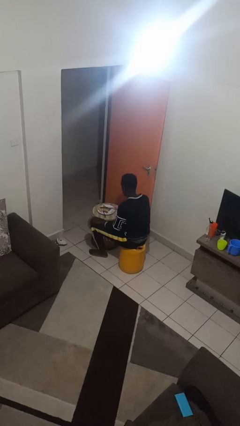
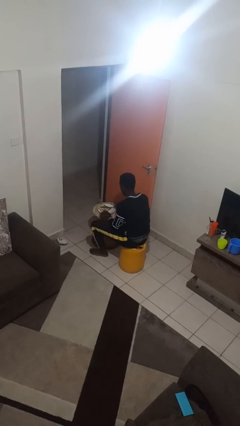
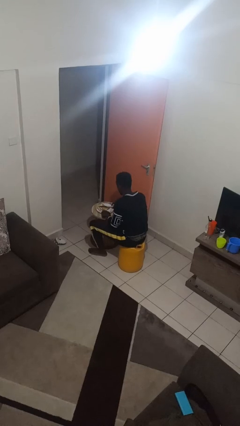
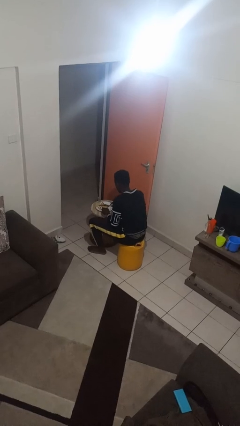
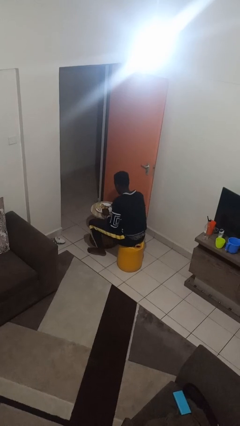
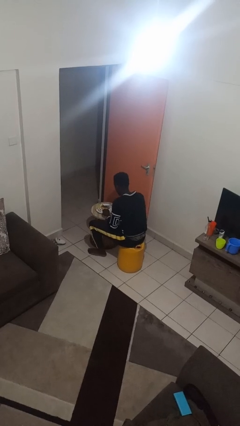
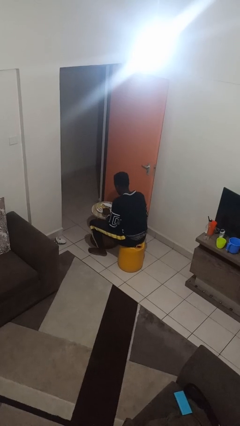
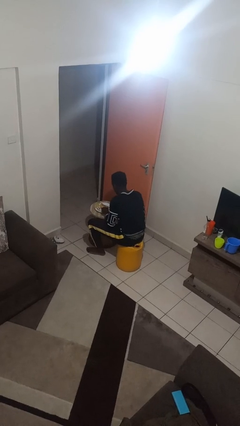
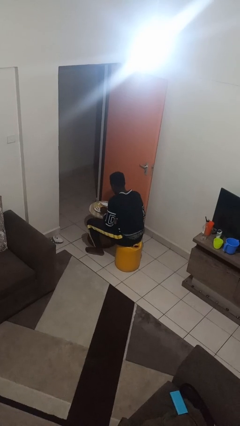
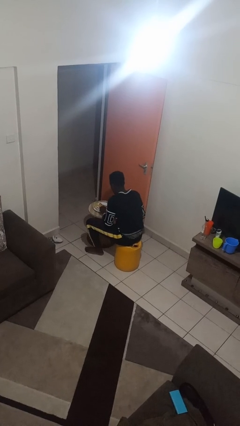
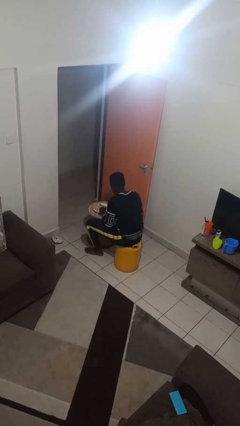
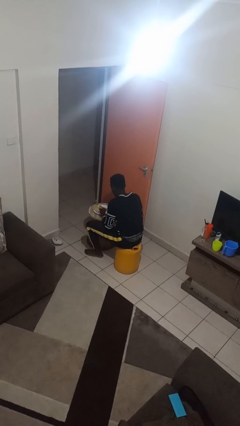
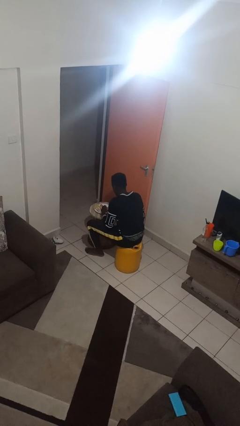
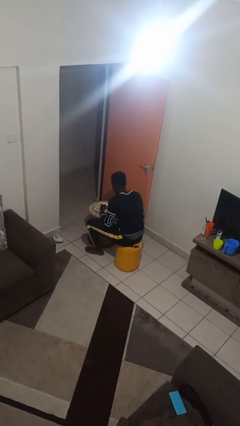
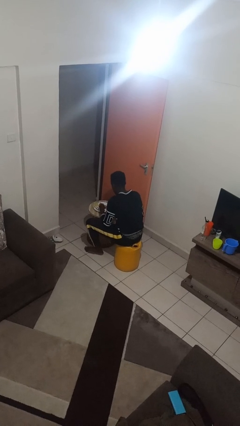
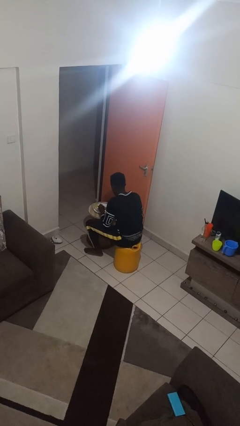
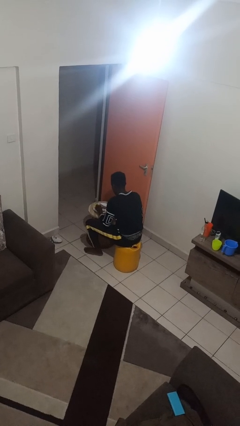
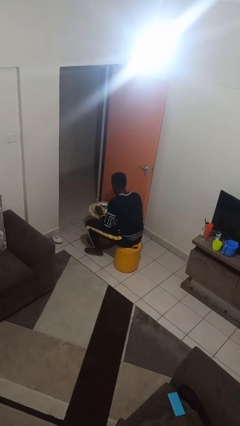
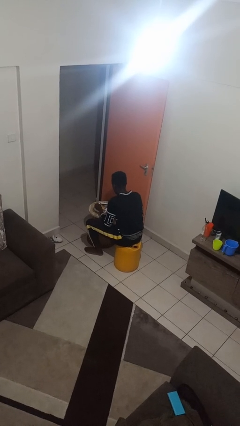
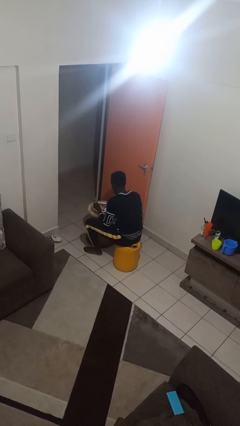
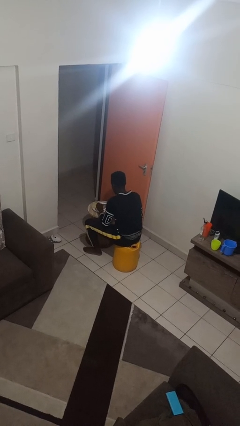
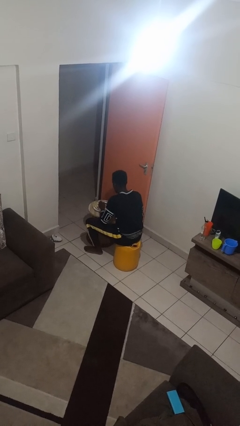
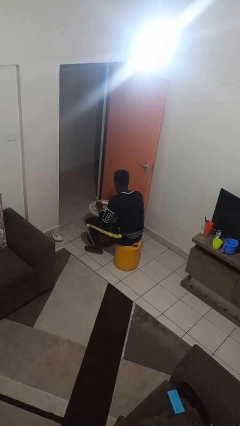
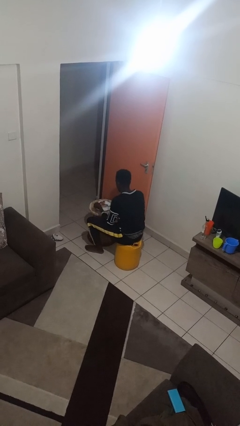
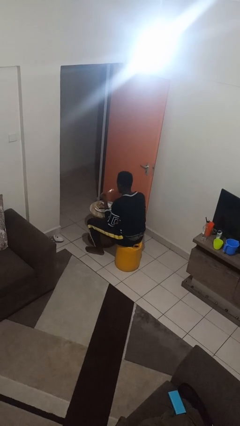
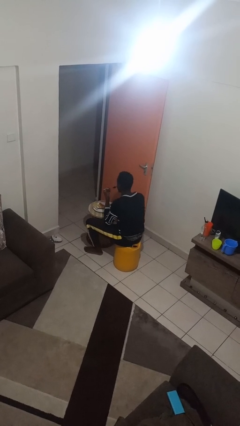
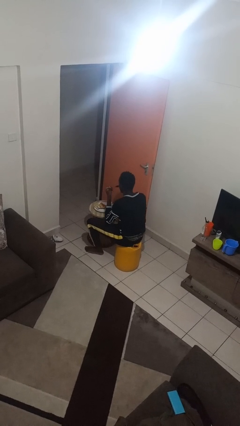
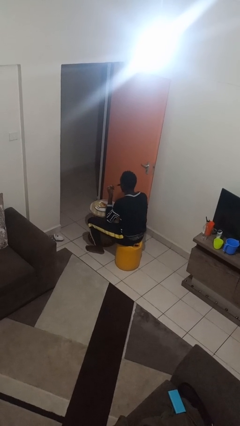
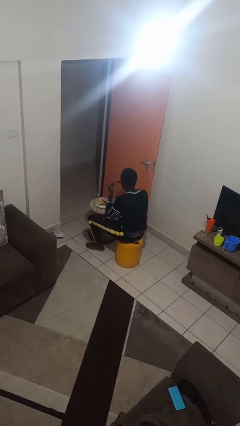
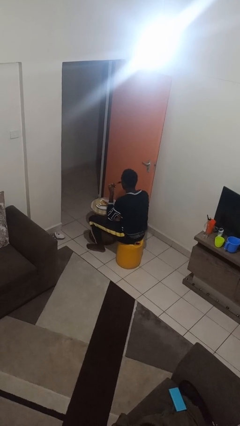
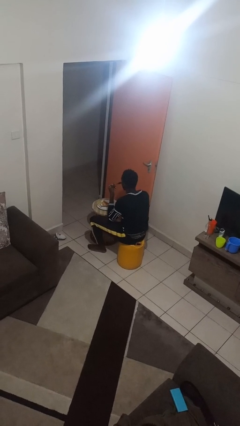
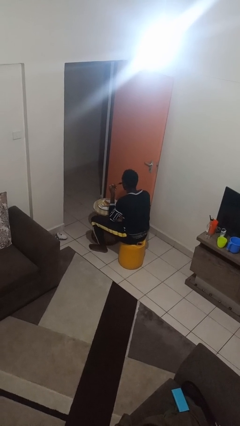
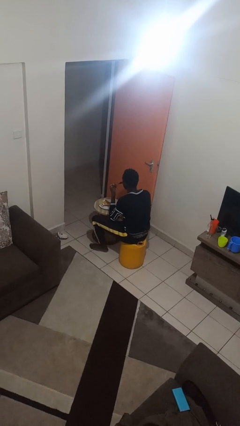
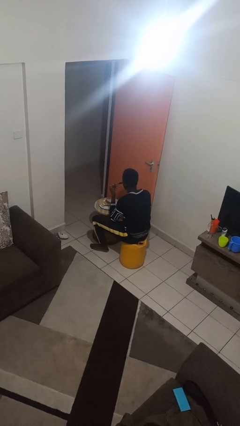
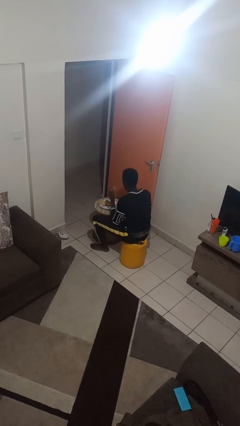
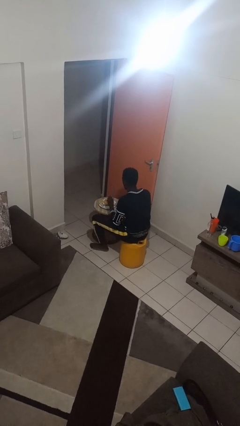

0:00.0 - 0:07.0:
person eats with utensil

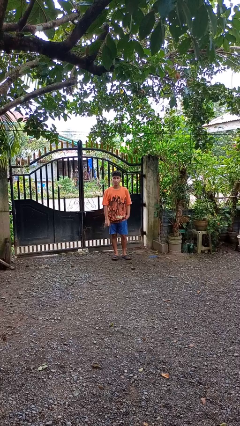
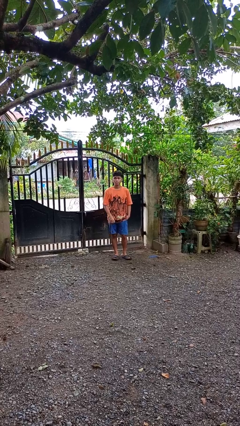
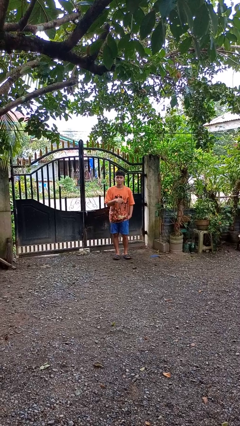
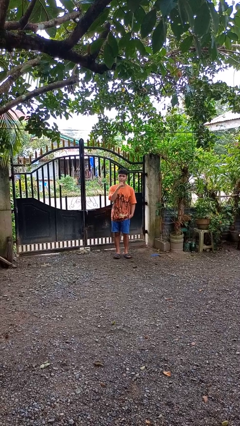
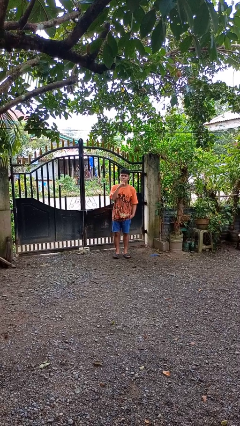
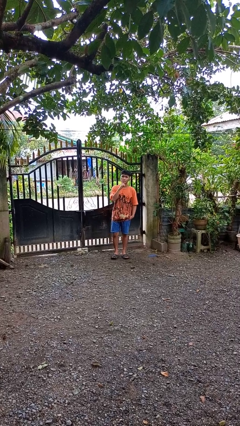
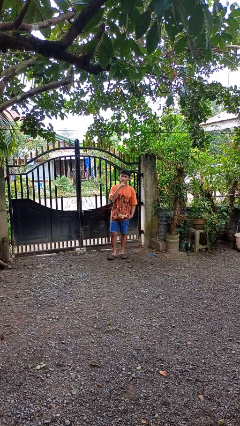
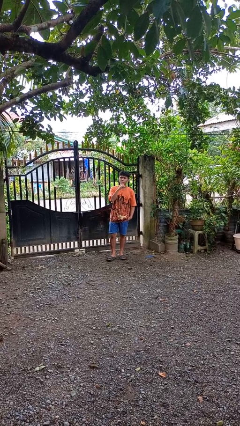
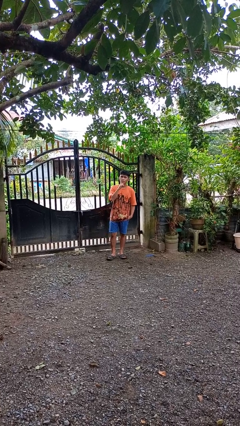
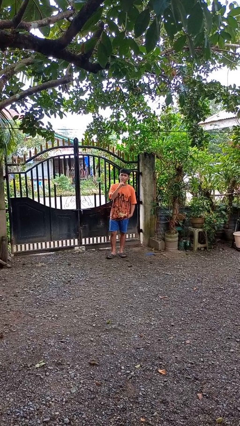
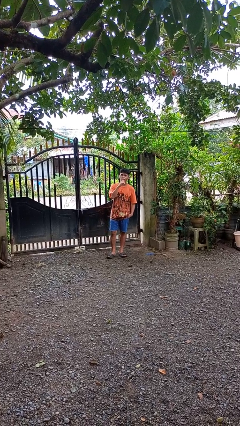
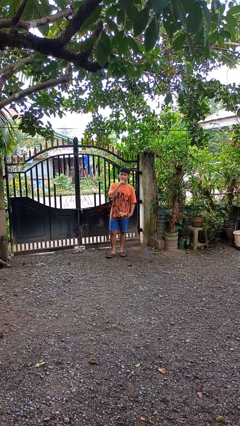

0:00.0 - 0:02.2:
person strokes chin

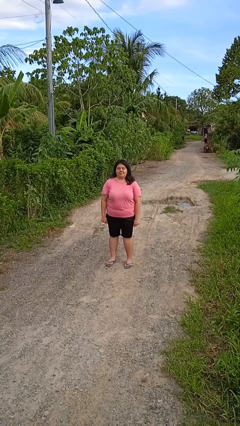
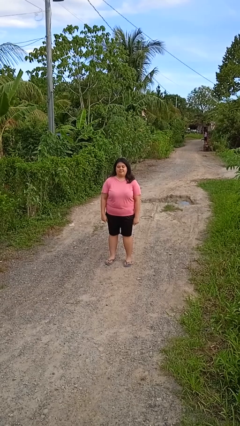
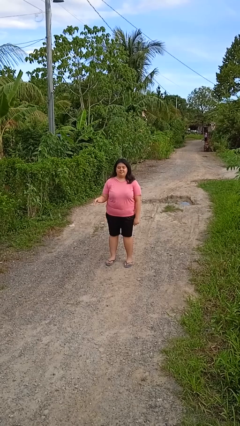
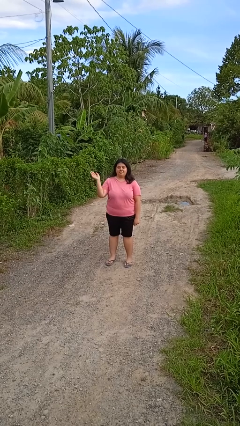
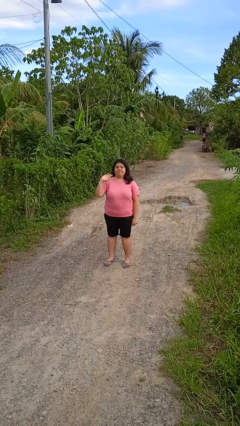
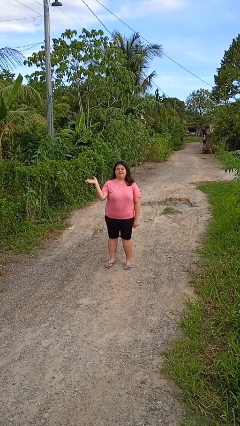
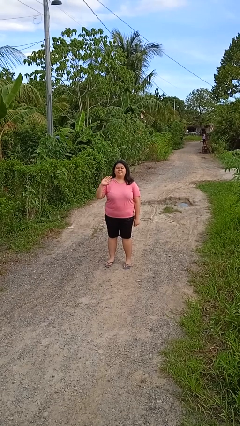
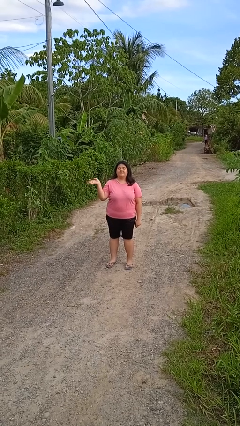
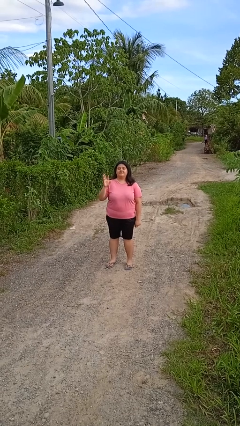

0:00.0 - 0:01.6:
person waves at person

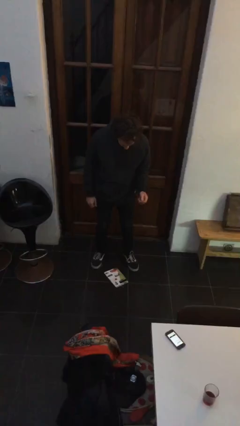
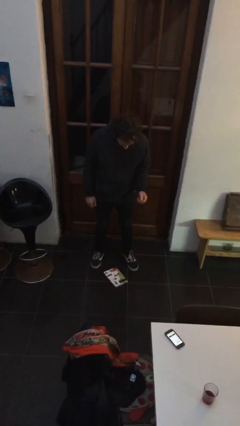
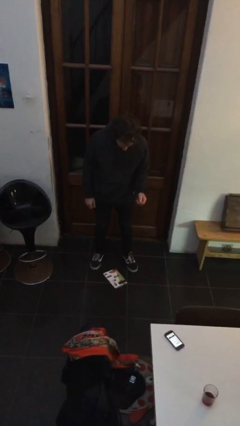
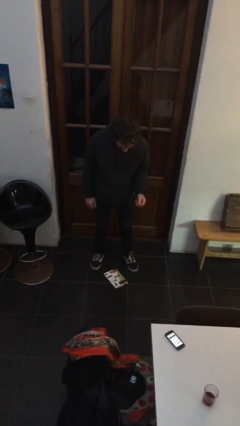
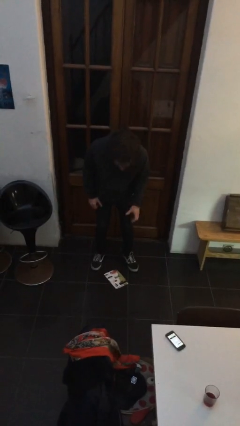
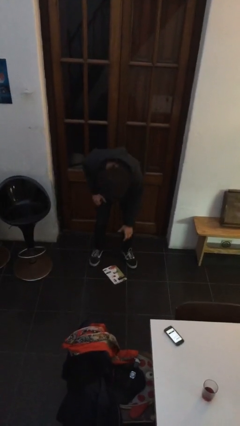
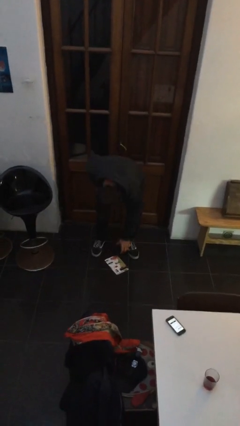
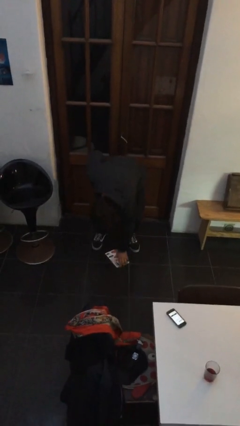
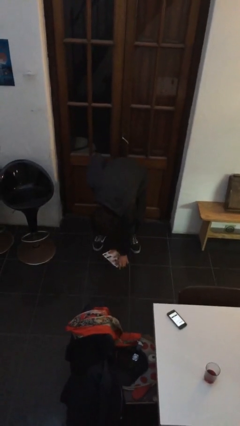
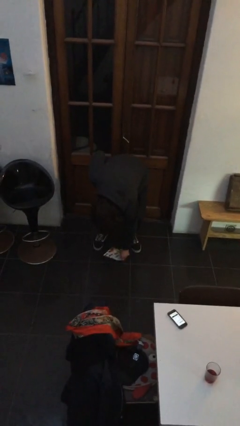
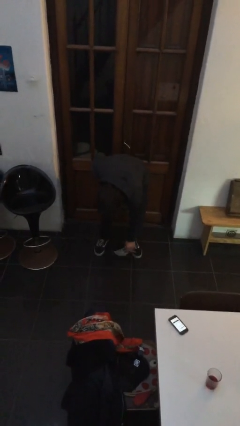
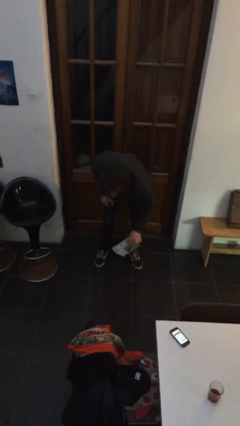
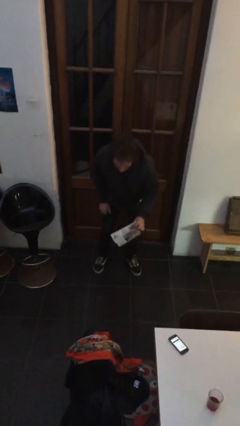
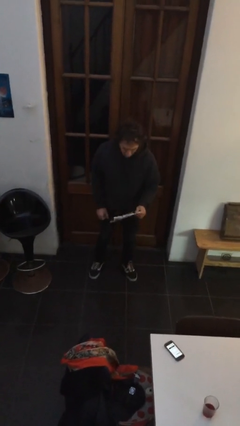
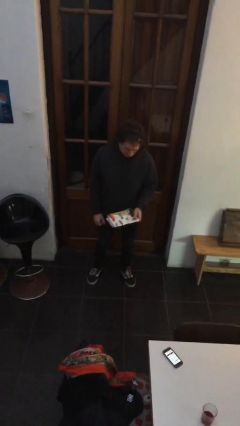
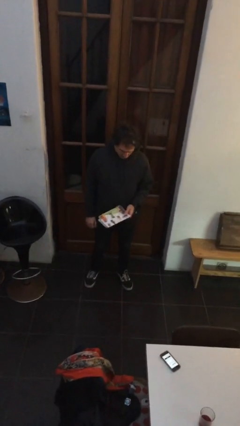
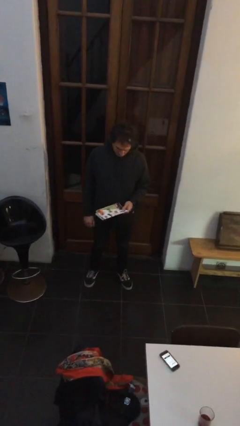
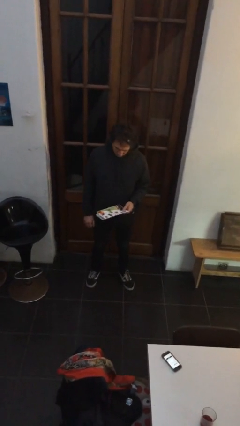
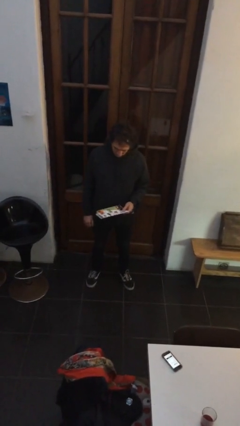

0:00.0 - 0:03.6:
person picks up object from floor

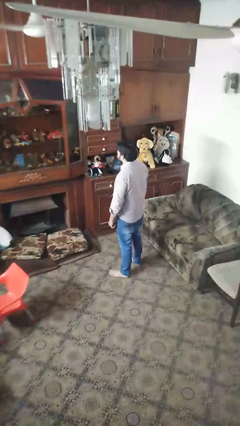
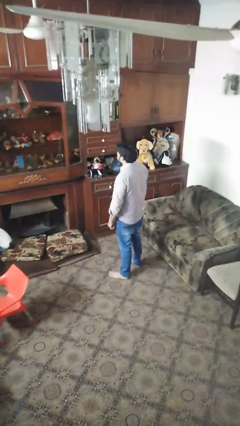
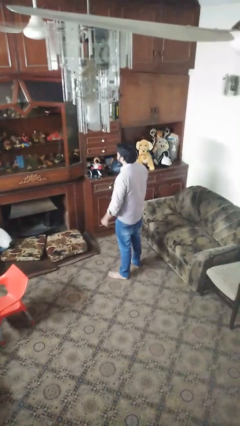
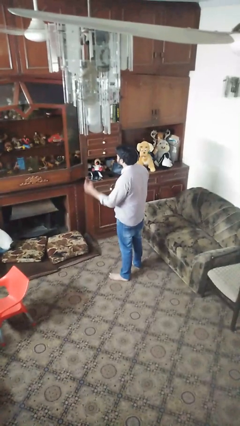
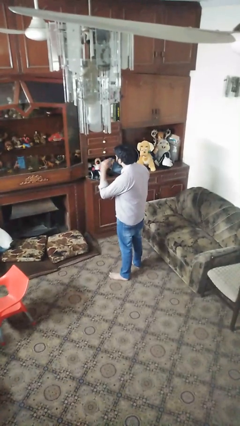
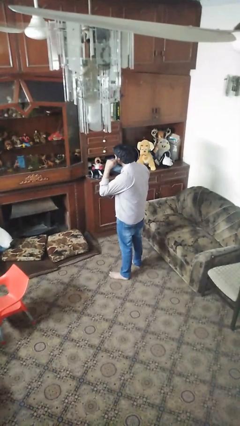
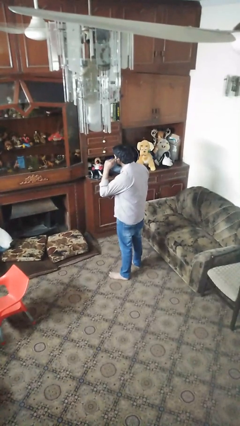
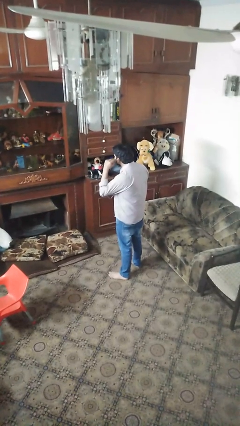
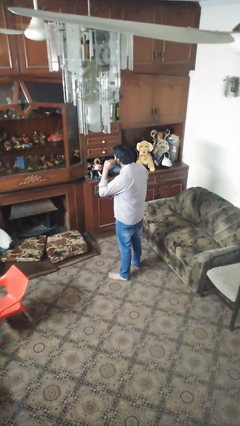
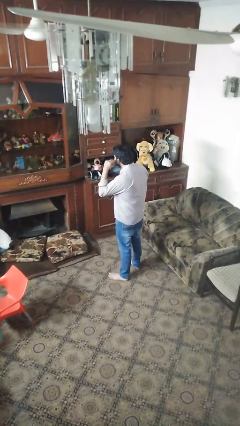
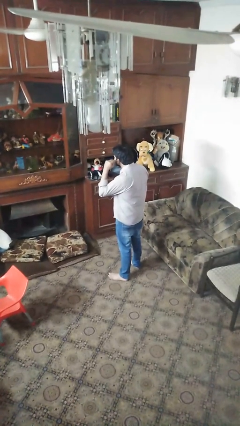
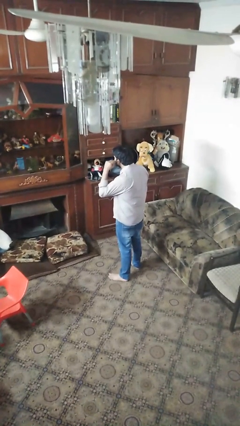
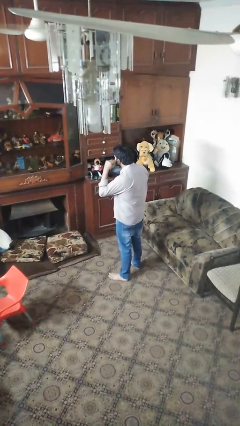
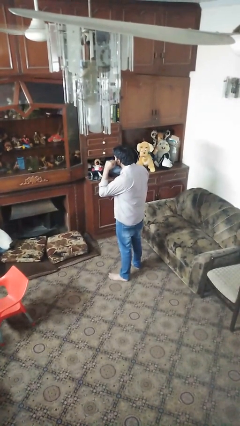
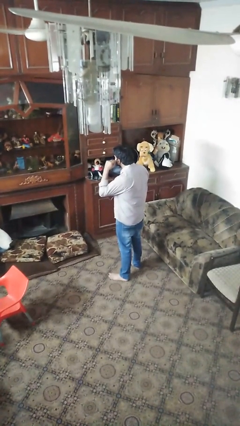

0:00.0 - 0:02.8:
person gestures listen closely
